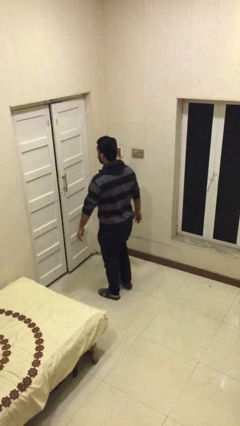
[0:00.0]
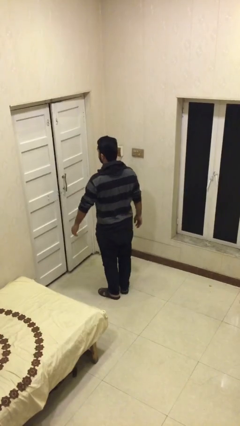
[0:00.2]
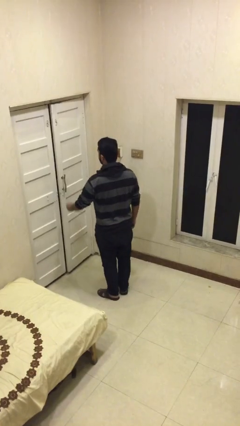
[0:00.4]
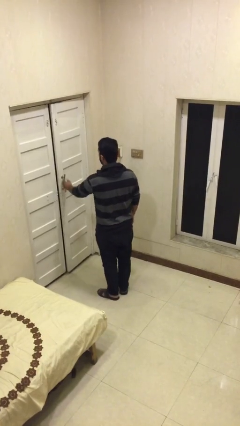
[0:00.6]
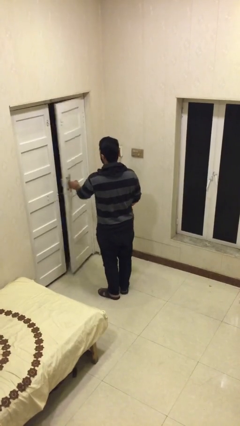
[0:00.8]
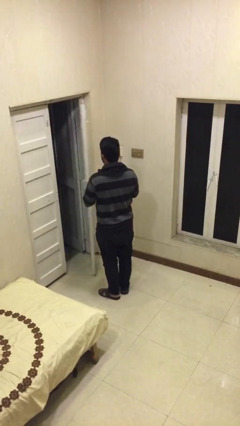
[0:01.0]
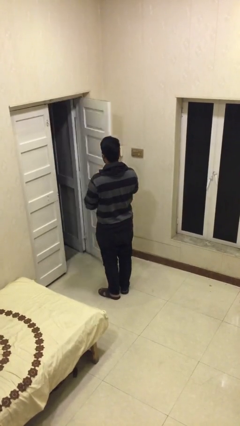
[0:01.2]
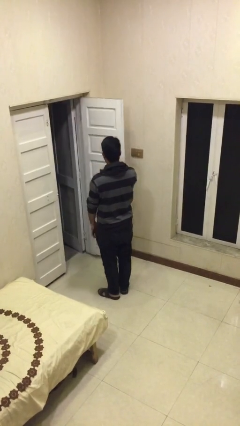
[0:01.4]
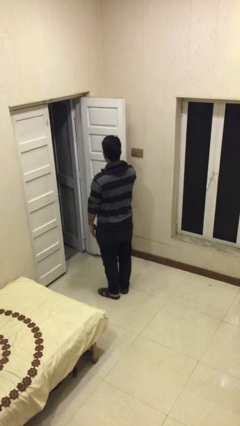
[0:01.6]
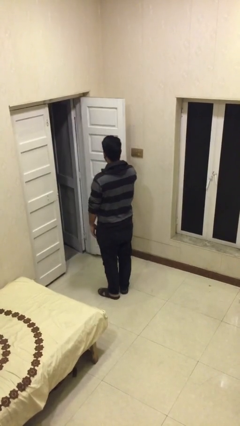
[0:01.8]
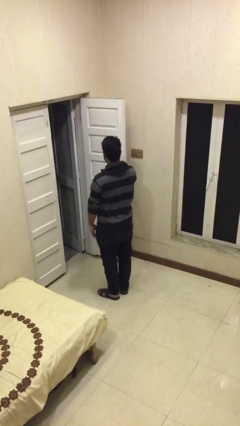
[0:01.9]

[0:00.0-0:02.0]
person opens facility door

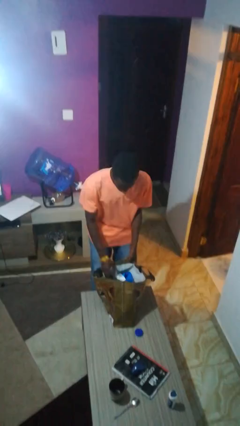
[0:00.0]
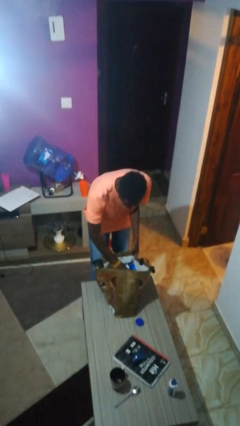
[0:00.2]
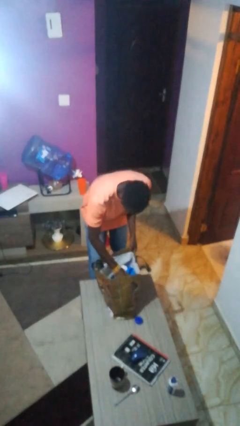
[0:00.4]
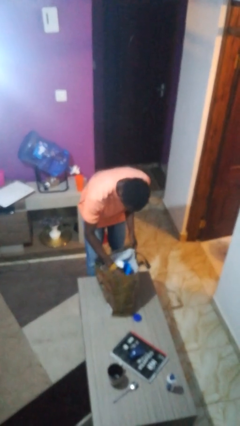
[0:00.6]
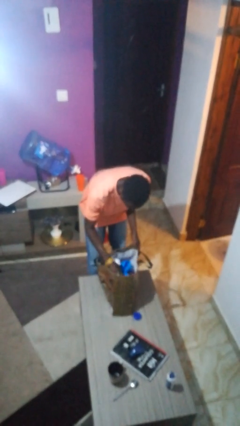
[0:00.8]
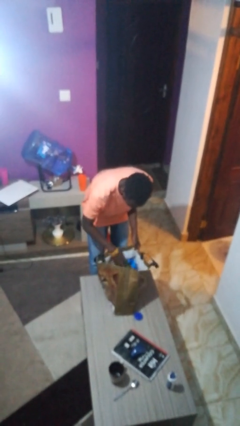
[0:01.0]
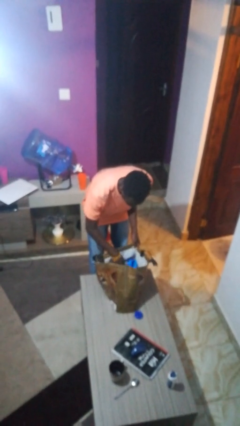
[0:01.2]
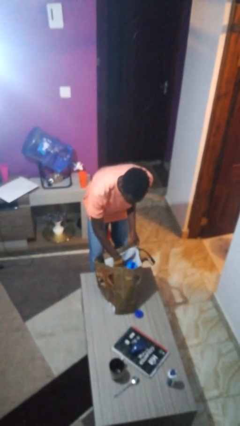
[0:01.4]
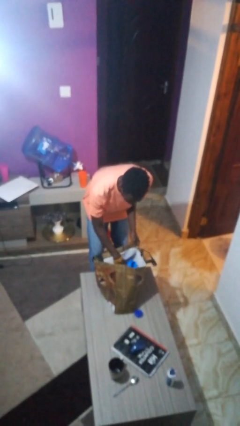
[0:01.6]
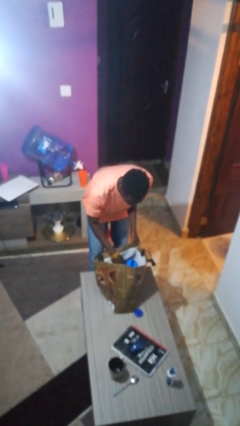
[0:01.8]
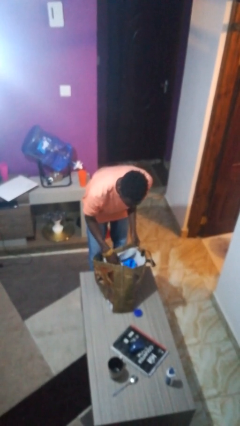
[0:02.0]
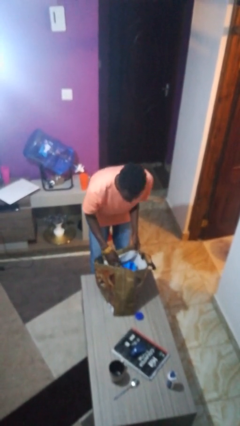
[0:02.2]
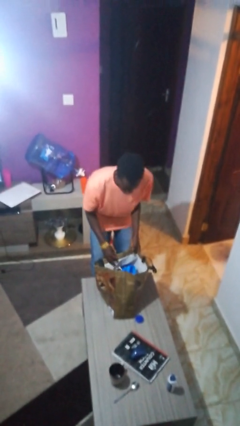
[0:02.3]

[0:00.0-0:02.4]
person searches in bag

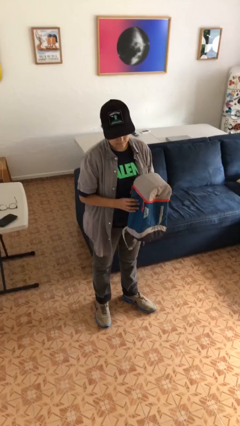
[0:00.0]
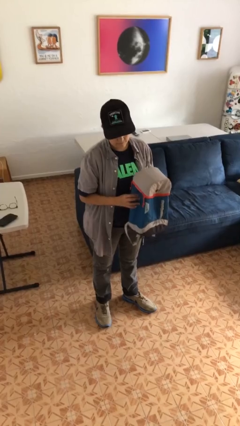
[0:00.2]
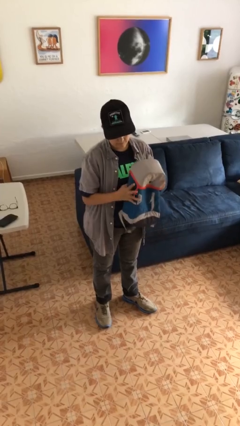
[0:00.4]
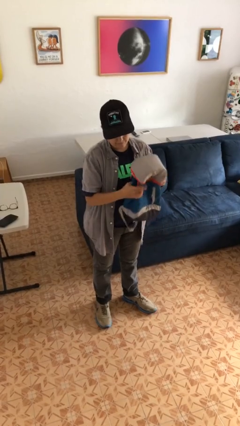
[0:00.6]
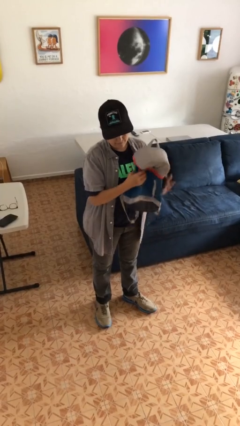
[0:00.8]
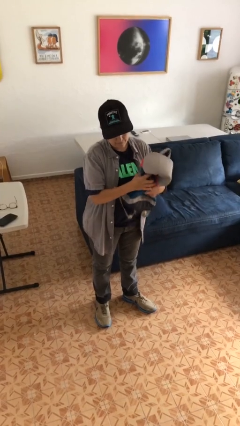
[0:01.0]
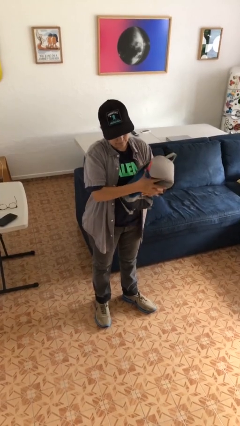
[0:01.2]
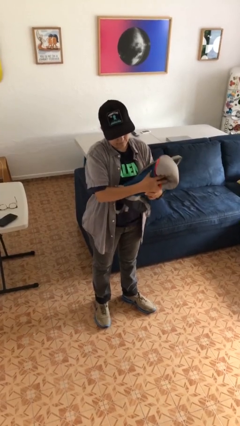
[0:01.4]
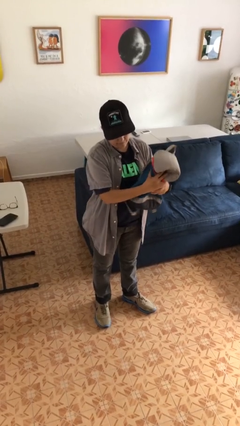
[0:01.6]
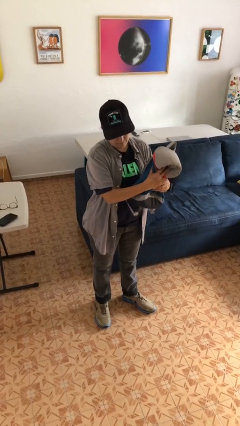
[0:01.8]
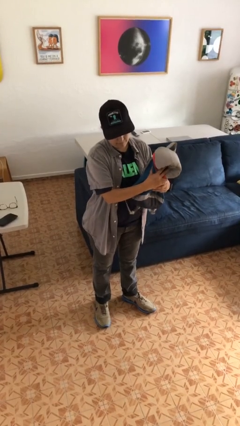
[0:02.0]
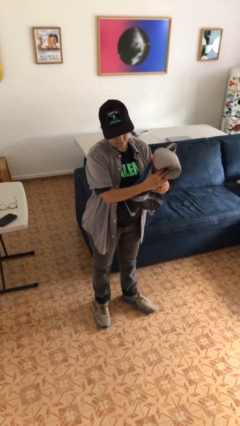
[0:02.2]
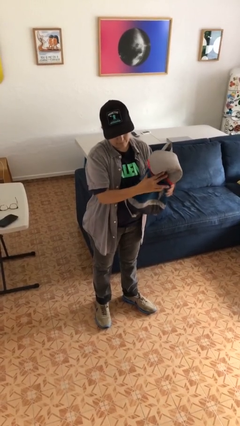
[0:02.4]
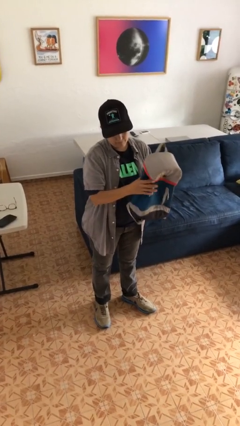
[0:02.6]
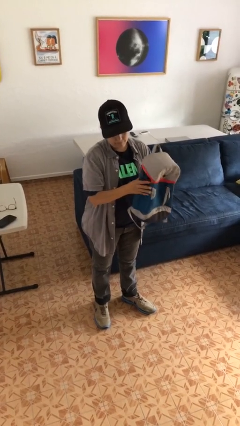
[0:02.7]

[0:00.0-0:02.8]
person squeezes object

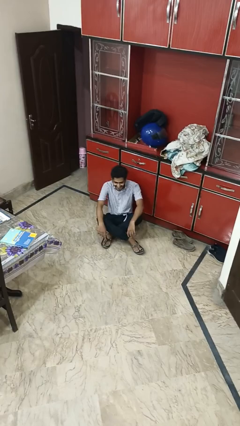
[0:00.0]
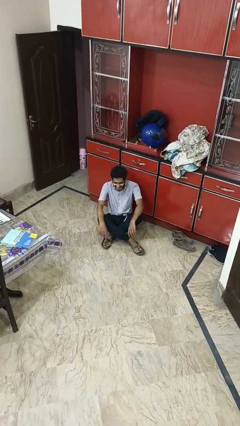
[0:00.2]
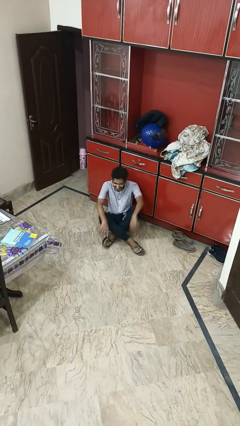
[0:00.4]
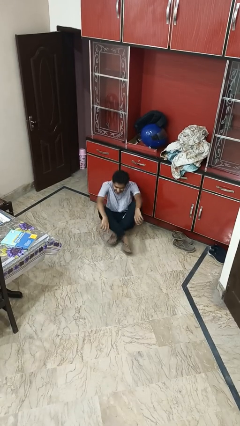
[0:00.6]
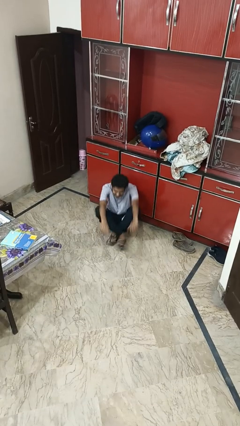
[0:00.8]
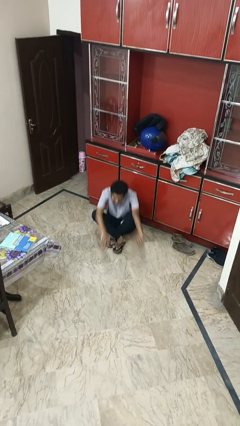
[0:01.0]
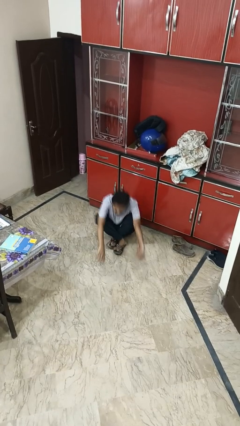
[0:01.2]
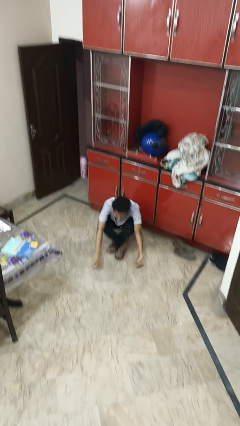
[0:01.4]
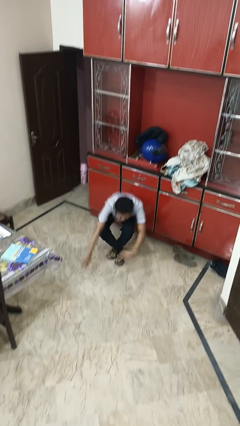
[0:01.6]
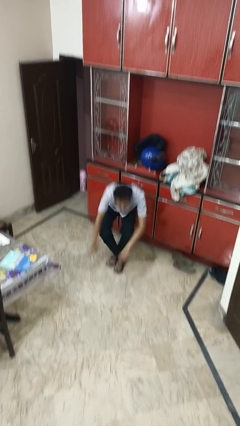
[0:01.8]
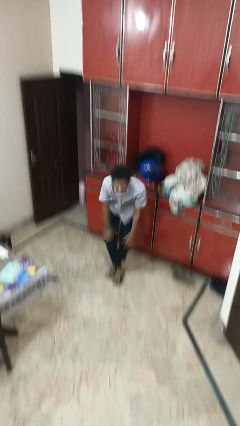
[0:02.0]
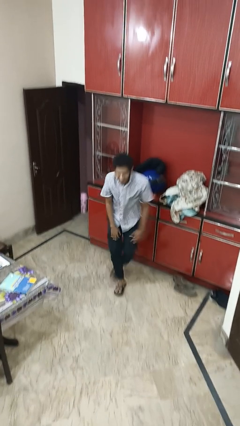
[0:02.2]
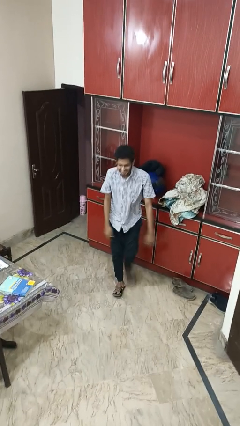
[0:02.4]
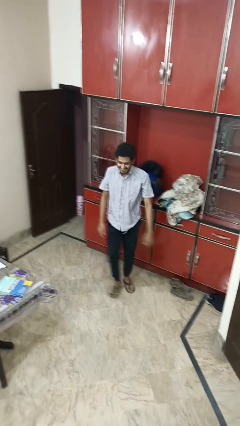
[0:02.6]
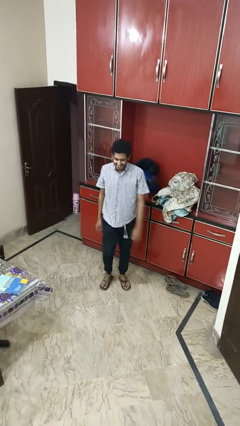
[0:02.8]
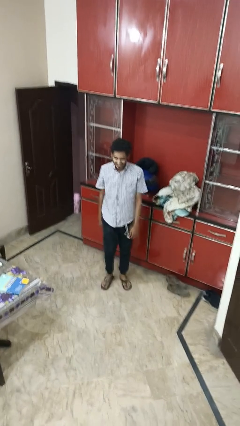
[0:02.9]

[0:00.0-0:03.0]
person stands up from floor

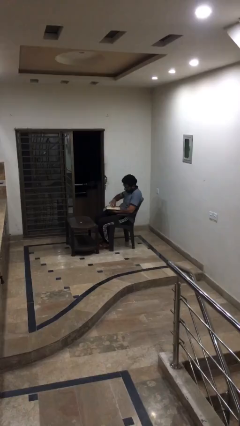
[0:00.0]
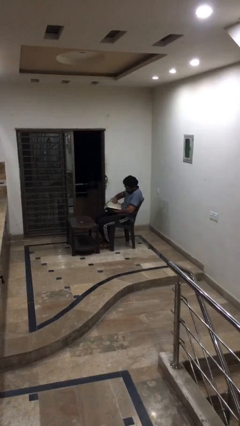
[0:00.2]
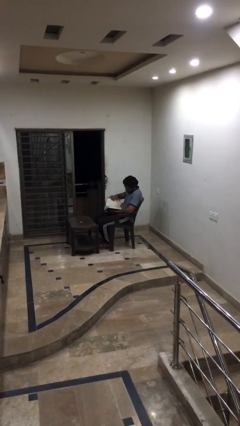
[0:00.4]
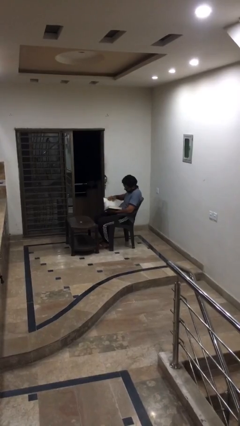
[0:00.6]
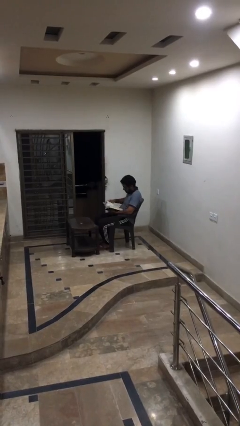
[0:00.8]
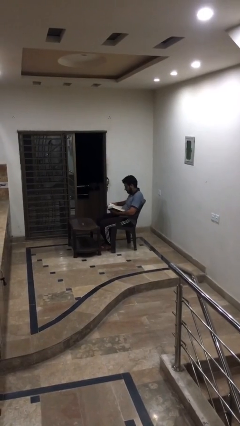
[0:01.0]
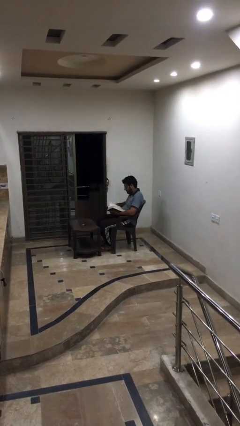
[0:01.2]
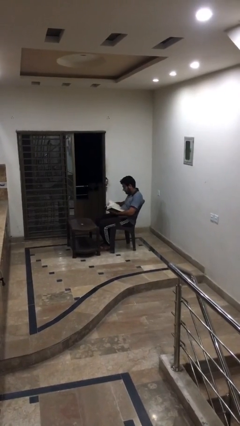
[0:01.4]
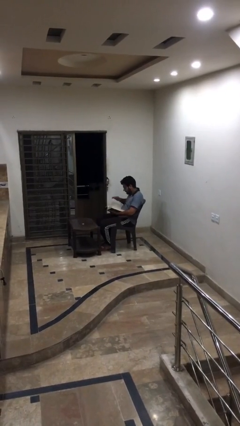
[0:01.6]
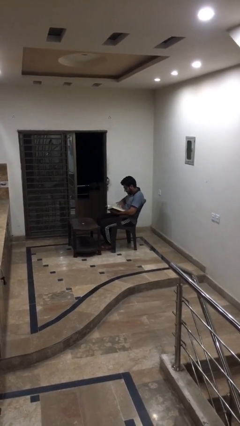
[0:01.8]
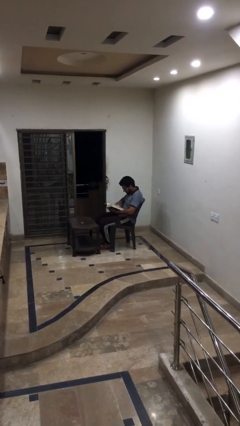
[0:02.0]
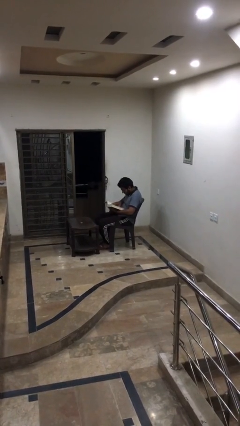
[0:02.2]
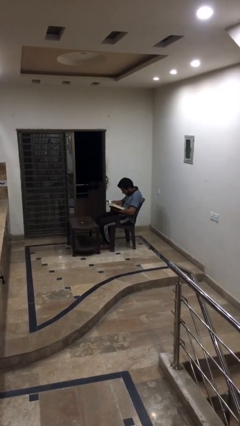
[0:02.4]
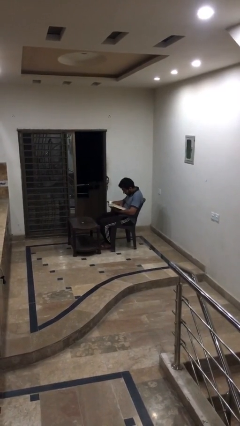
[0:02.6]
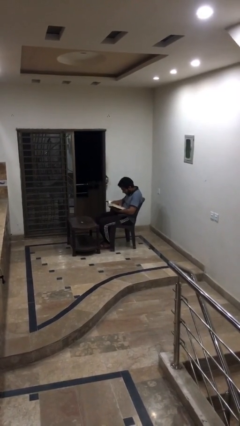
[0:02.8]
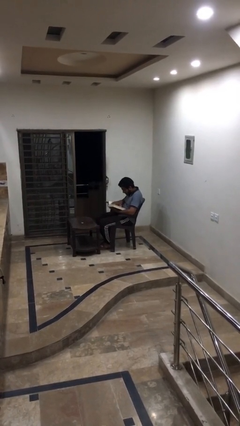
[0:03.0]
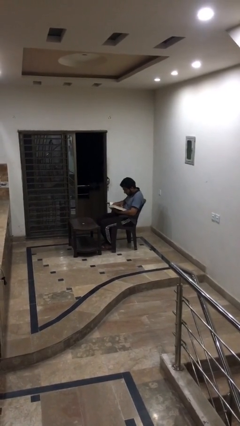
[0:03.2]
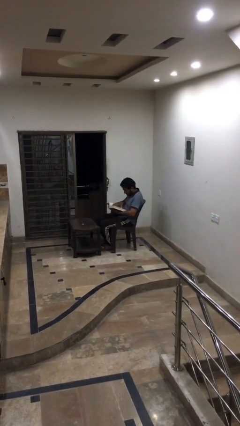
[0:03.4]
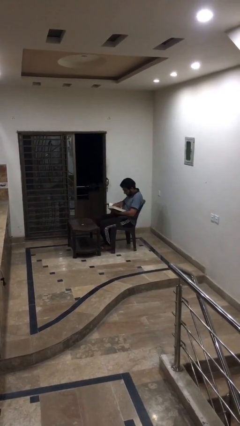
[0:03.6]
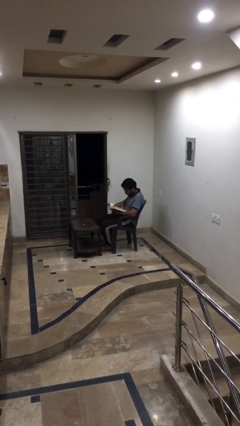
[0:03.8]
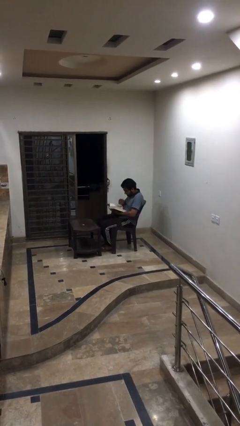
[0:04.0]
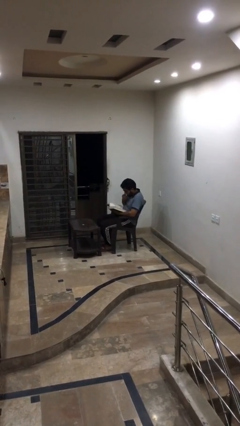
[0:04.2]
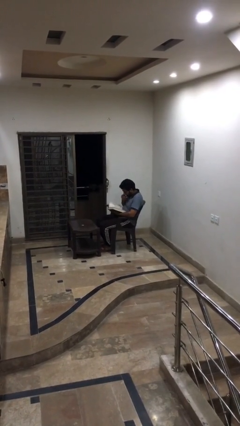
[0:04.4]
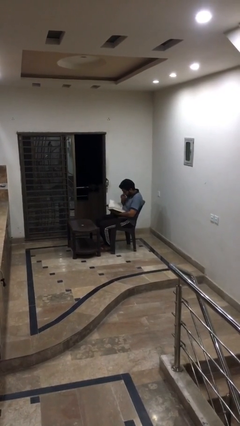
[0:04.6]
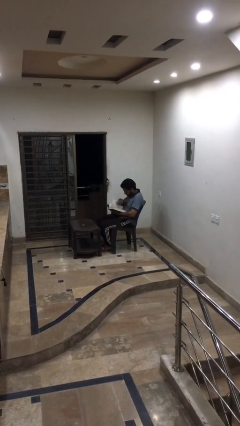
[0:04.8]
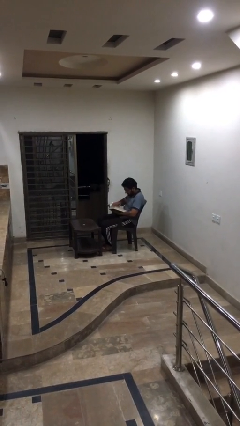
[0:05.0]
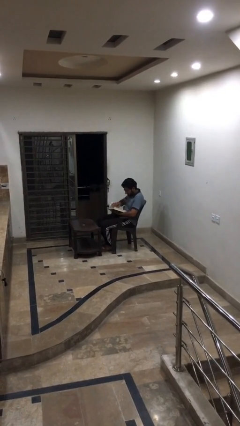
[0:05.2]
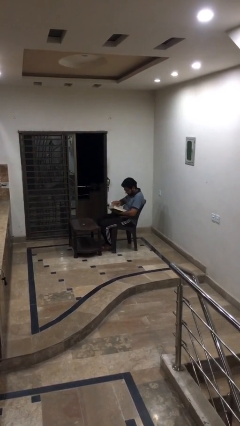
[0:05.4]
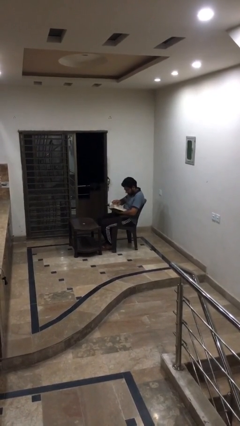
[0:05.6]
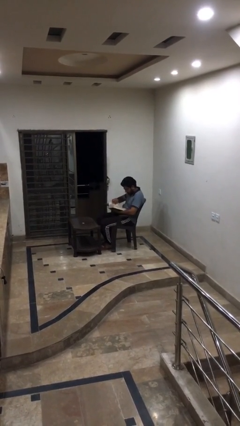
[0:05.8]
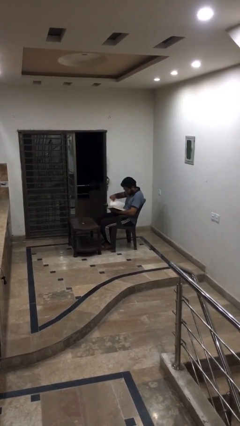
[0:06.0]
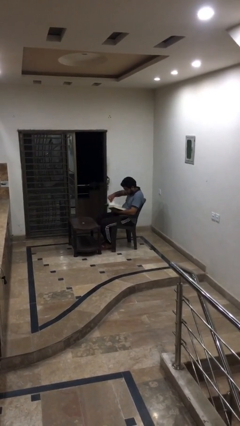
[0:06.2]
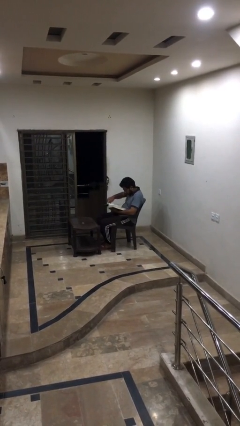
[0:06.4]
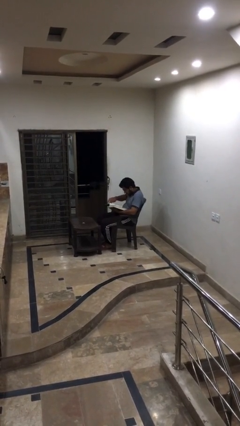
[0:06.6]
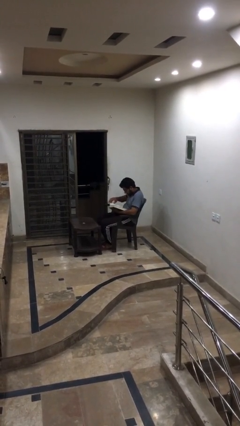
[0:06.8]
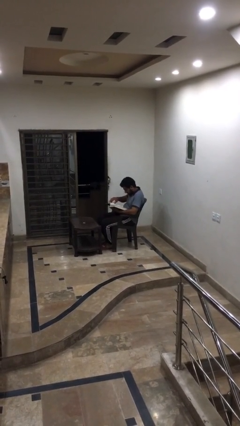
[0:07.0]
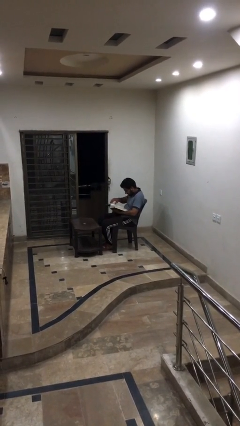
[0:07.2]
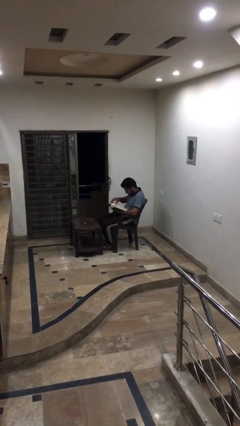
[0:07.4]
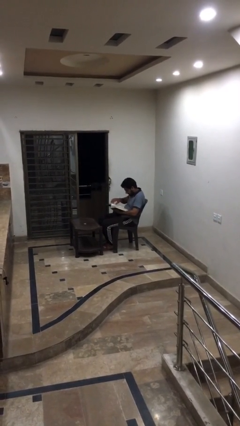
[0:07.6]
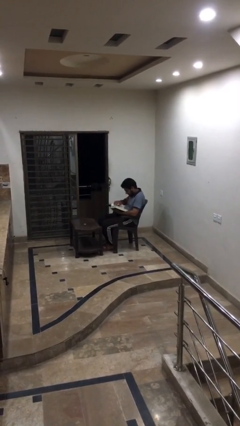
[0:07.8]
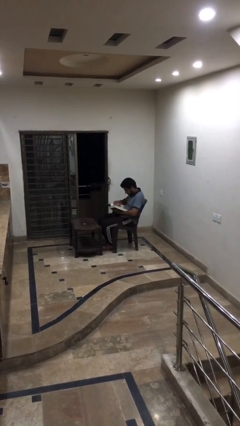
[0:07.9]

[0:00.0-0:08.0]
person reads document
